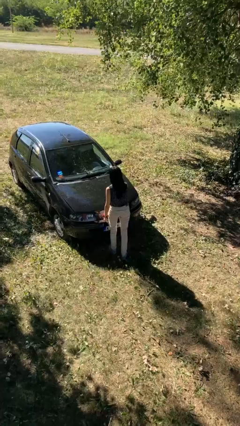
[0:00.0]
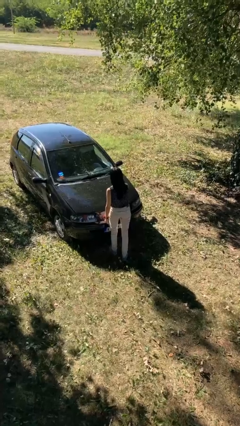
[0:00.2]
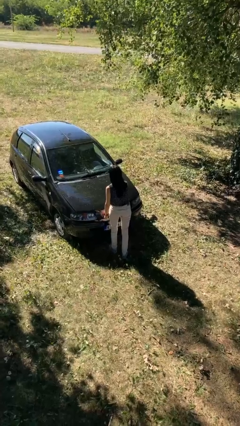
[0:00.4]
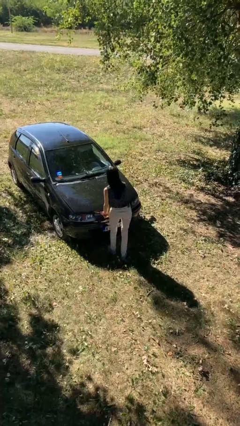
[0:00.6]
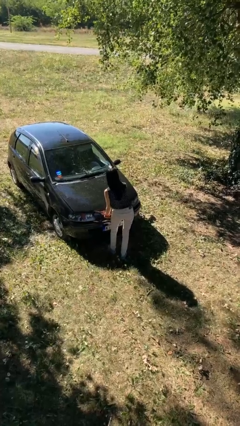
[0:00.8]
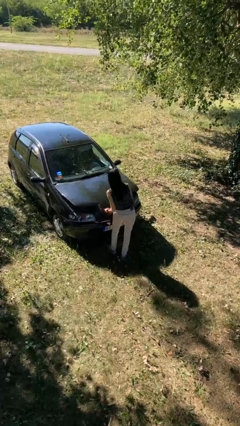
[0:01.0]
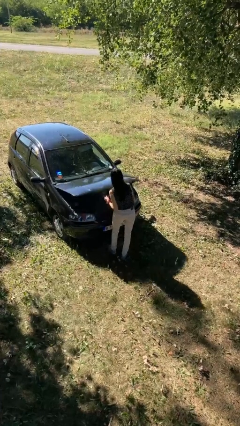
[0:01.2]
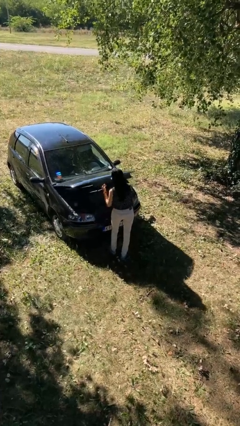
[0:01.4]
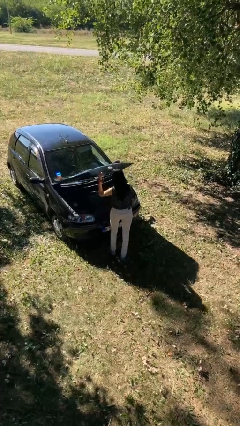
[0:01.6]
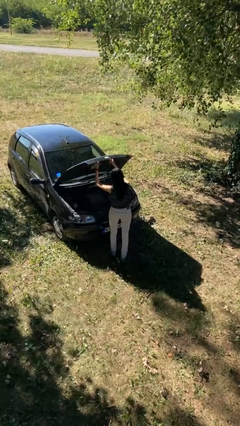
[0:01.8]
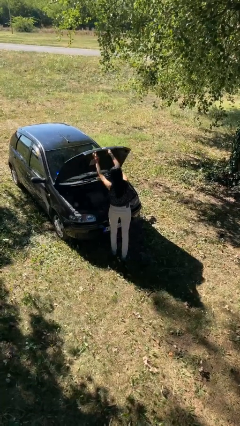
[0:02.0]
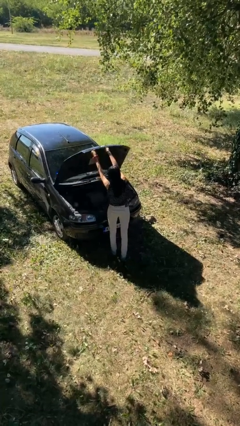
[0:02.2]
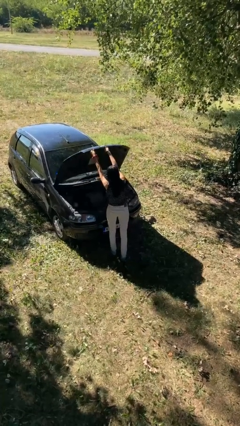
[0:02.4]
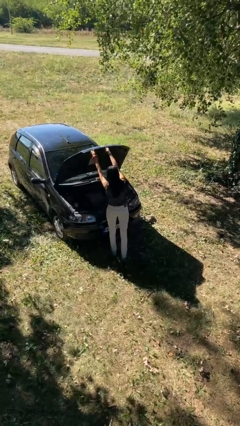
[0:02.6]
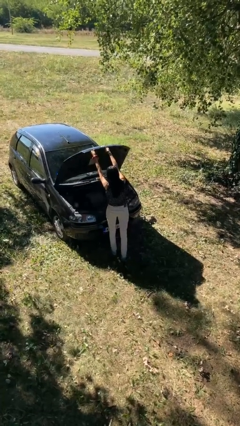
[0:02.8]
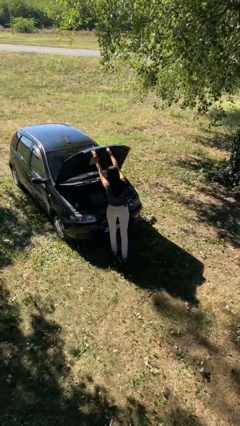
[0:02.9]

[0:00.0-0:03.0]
person opens car hood

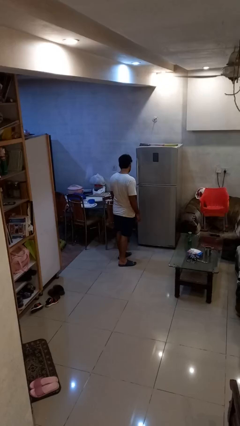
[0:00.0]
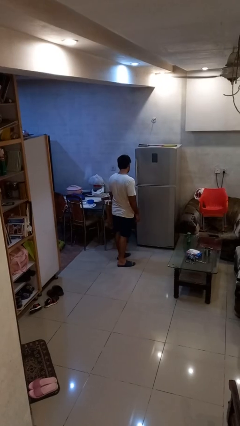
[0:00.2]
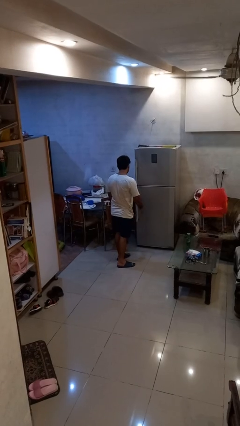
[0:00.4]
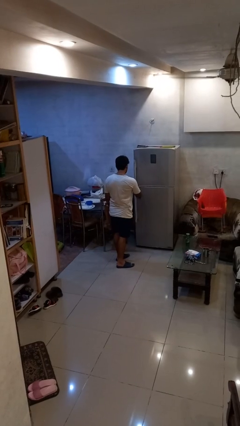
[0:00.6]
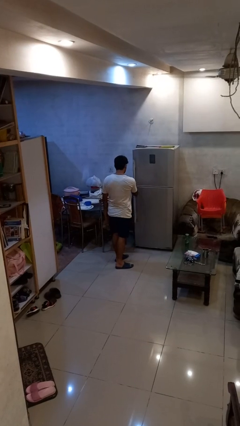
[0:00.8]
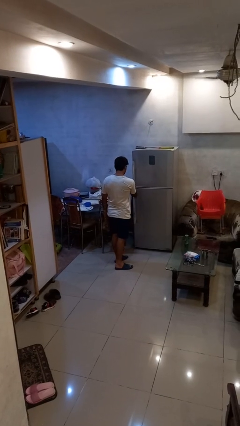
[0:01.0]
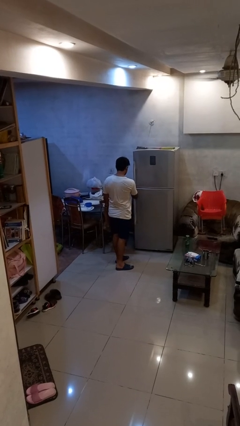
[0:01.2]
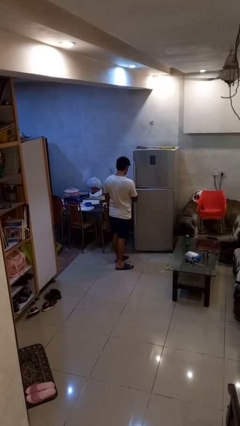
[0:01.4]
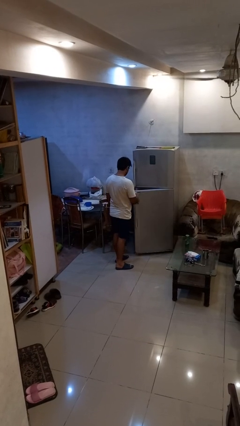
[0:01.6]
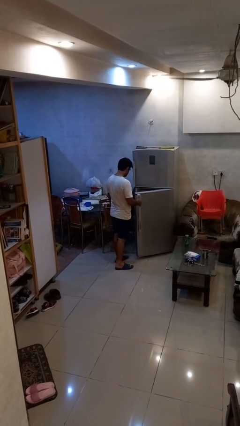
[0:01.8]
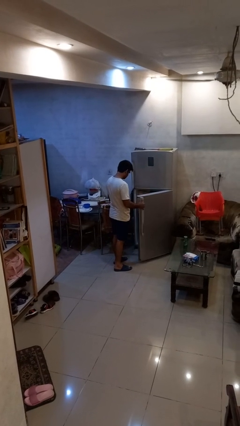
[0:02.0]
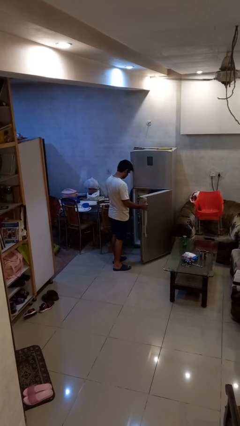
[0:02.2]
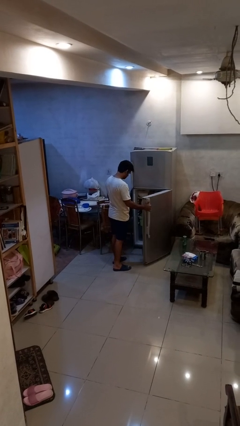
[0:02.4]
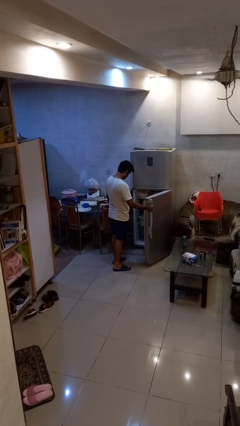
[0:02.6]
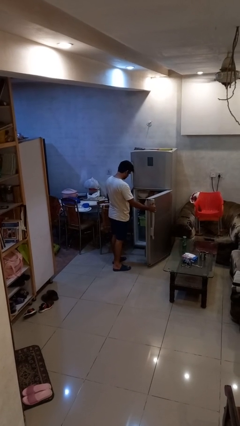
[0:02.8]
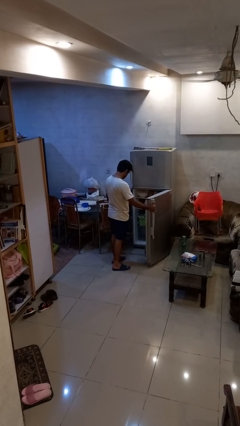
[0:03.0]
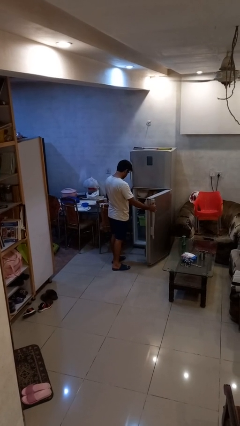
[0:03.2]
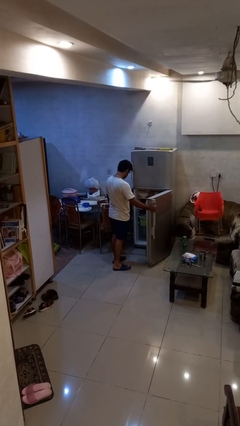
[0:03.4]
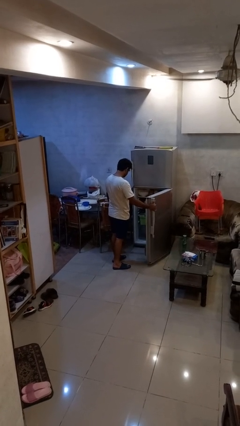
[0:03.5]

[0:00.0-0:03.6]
person opens refrigerator

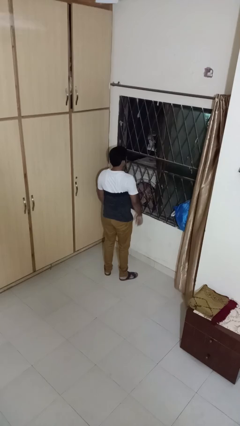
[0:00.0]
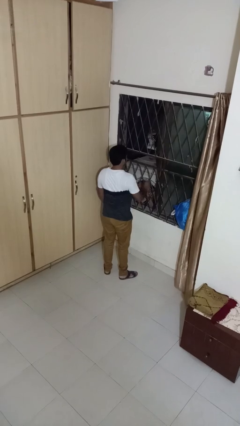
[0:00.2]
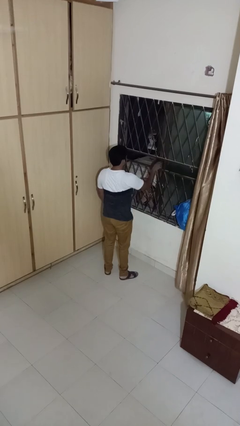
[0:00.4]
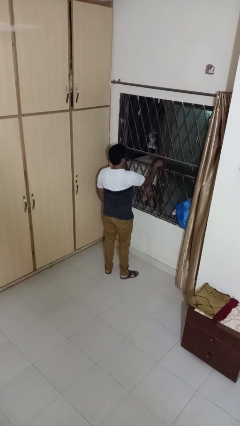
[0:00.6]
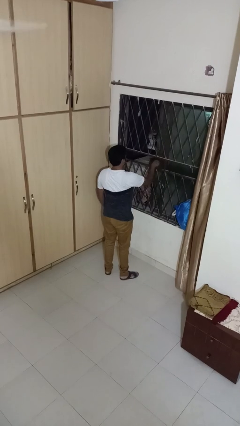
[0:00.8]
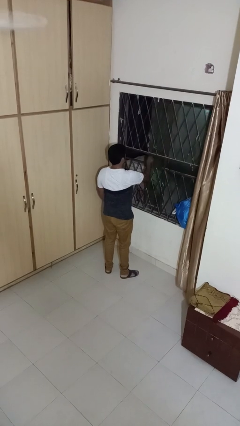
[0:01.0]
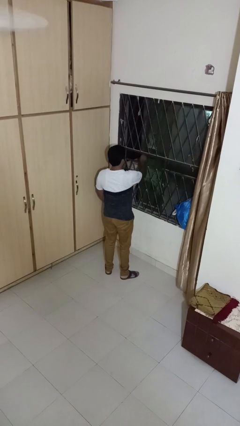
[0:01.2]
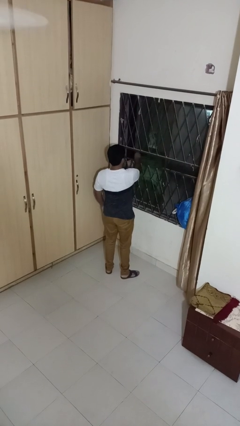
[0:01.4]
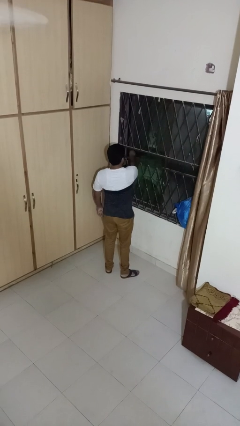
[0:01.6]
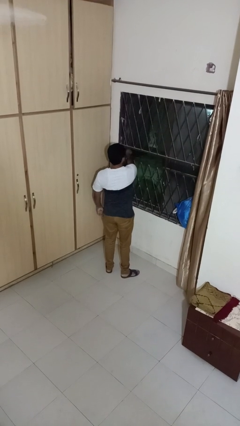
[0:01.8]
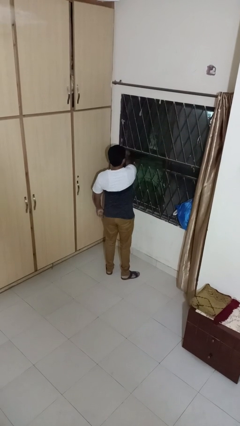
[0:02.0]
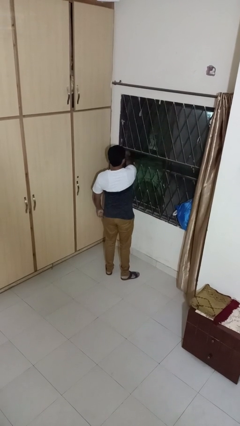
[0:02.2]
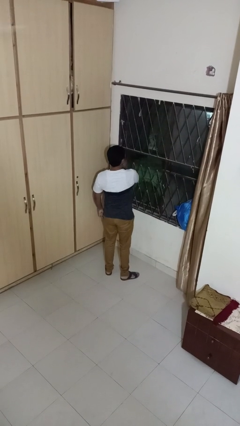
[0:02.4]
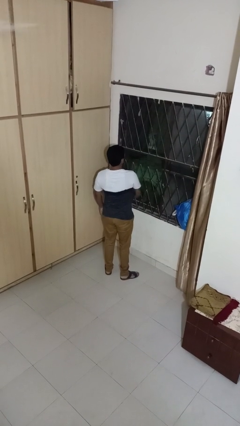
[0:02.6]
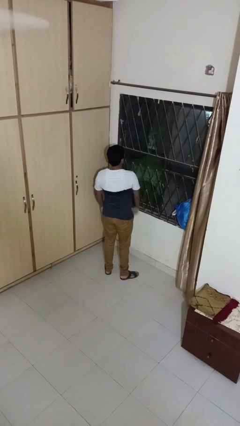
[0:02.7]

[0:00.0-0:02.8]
person closes home window

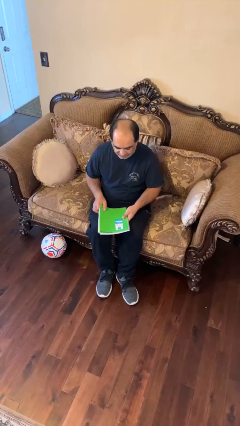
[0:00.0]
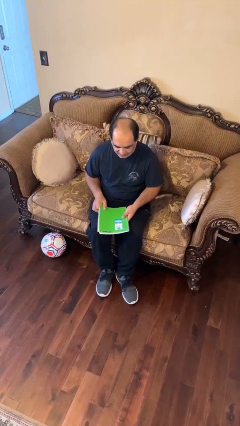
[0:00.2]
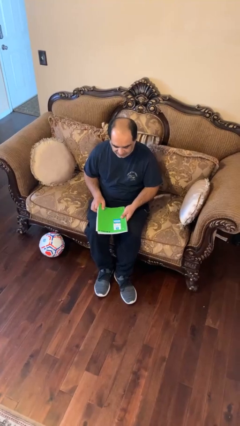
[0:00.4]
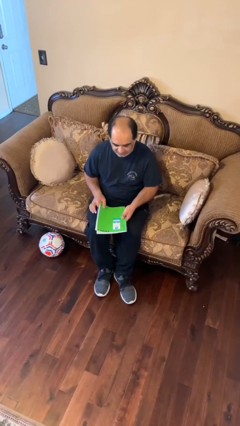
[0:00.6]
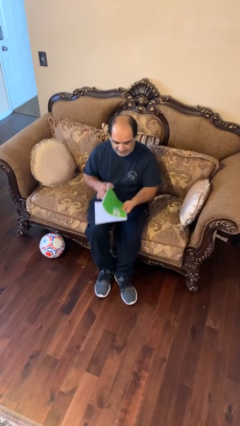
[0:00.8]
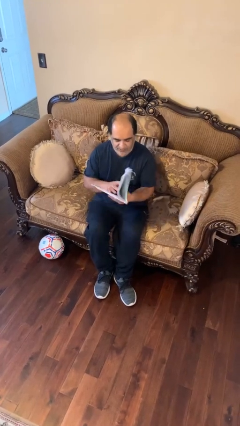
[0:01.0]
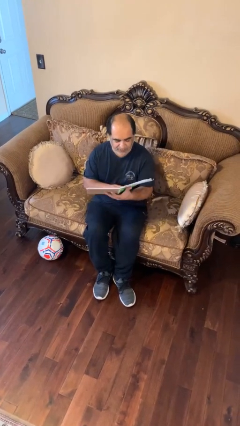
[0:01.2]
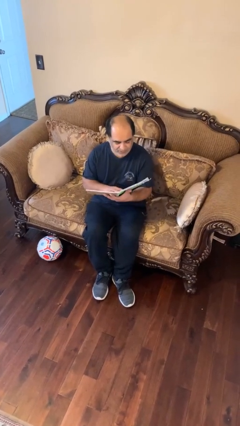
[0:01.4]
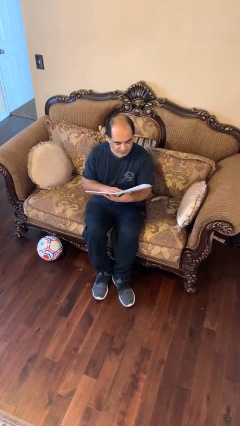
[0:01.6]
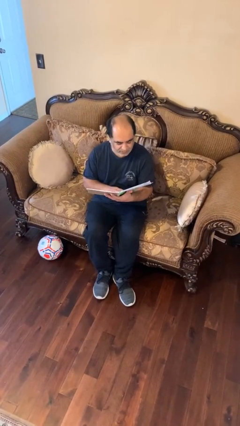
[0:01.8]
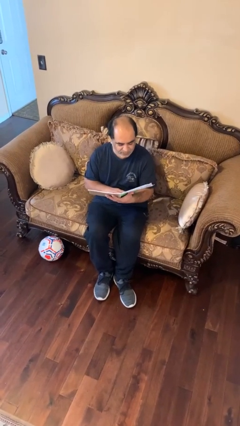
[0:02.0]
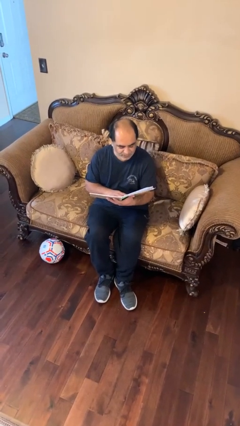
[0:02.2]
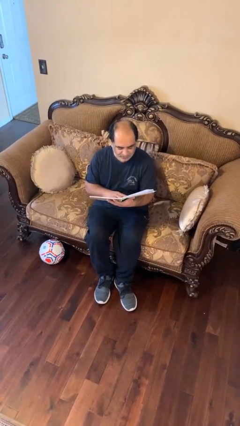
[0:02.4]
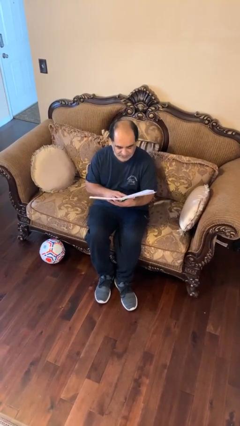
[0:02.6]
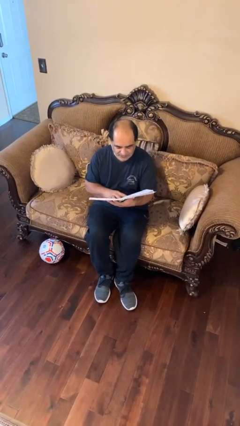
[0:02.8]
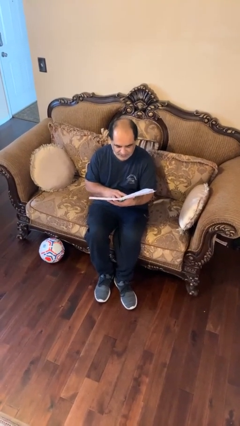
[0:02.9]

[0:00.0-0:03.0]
person reads document

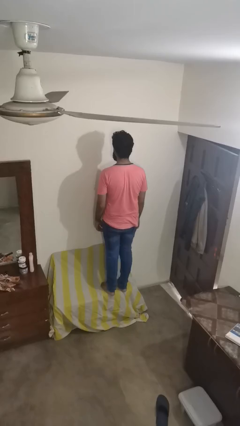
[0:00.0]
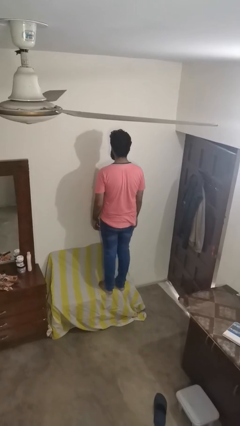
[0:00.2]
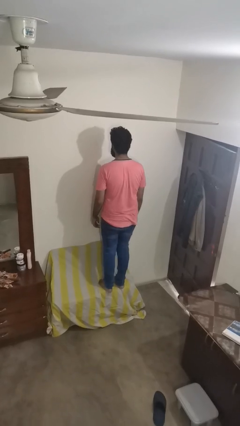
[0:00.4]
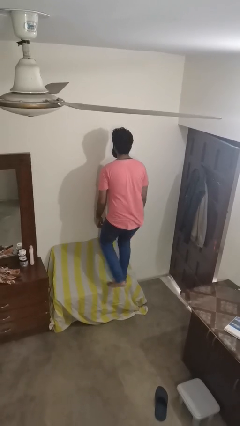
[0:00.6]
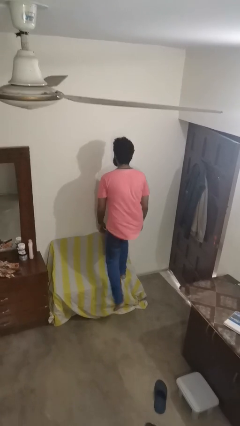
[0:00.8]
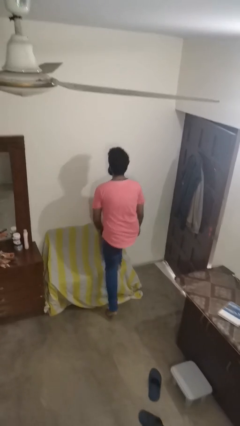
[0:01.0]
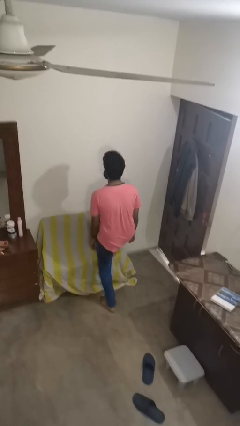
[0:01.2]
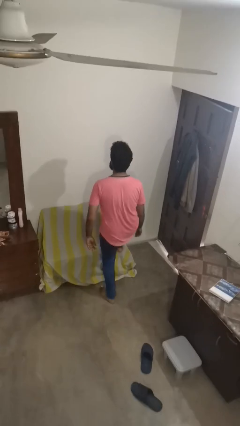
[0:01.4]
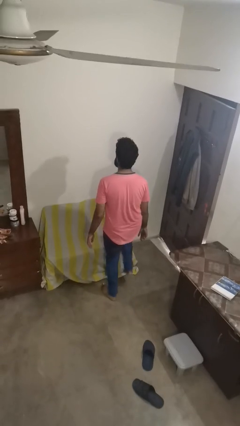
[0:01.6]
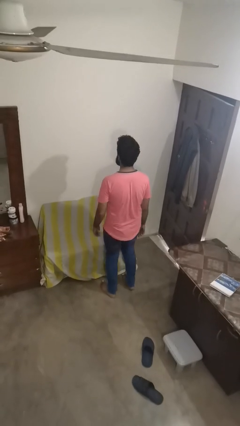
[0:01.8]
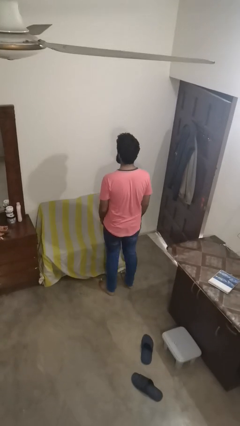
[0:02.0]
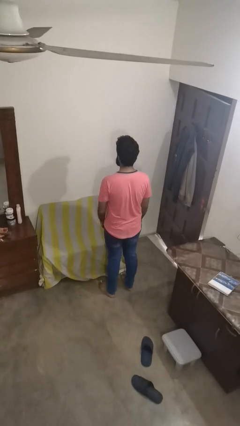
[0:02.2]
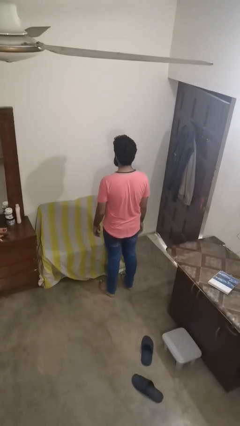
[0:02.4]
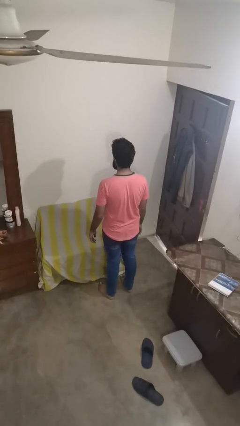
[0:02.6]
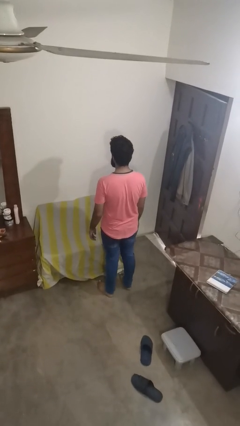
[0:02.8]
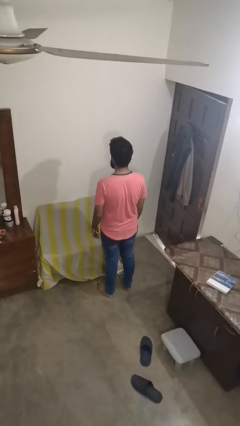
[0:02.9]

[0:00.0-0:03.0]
person climbs off couch

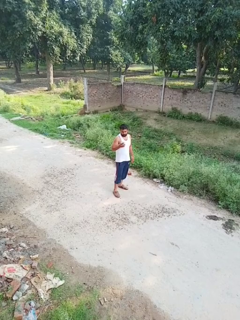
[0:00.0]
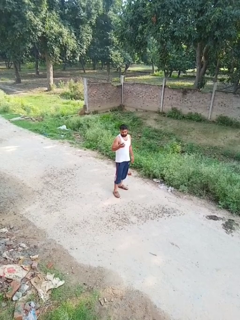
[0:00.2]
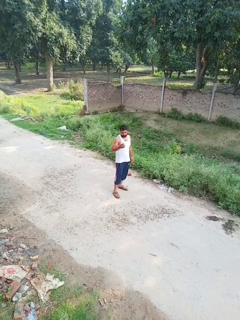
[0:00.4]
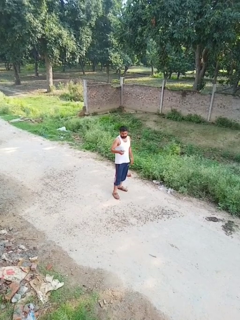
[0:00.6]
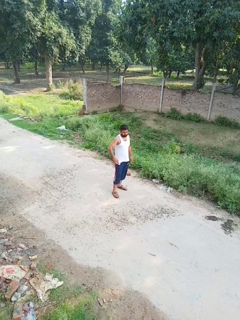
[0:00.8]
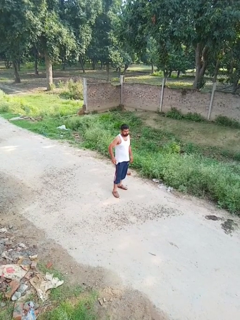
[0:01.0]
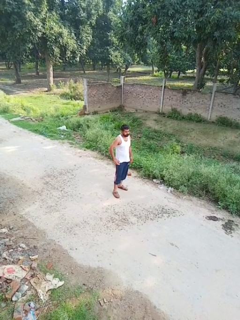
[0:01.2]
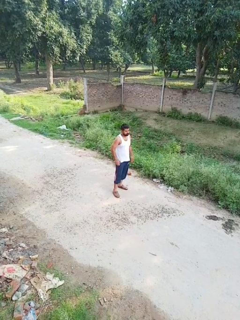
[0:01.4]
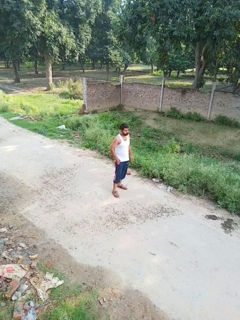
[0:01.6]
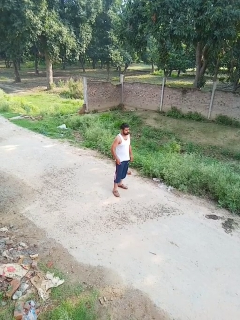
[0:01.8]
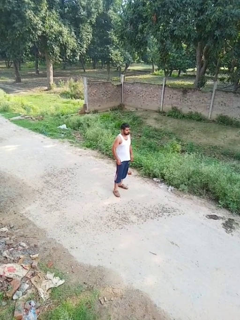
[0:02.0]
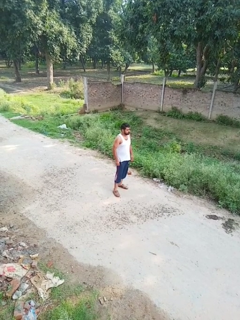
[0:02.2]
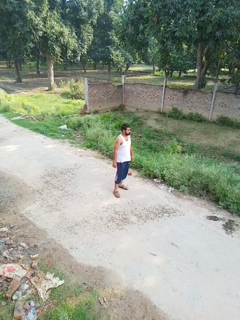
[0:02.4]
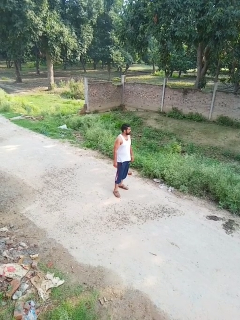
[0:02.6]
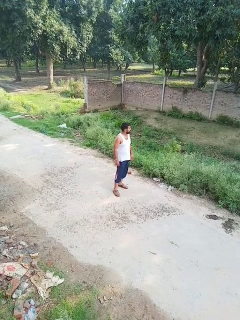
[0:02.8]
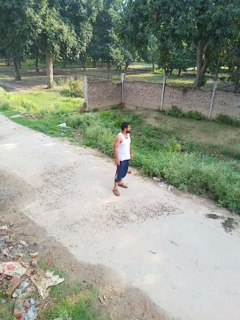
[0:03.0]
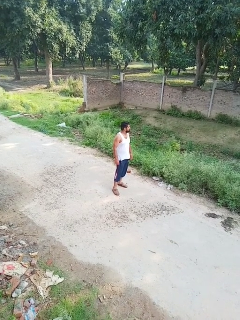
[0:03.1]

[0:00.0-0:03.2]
person puts phone into pocket
